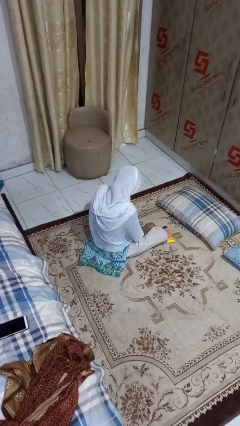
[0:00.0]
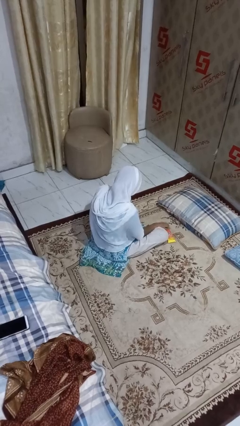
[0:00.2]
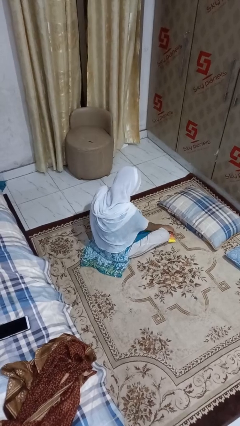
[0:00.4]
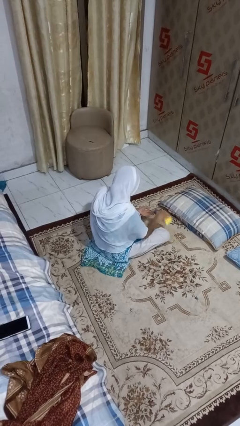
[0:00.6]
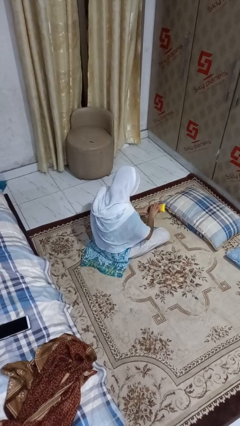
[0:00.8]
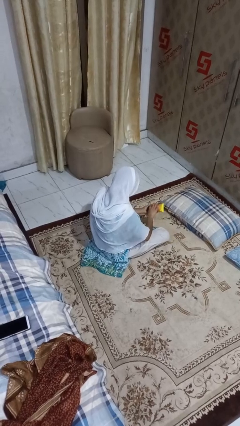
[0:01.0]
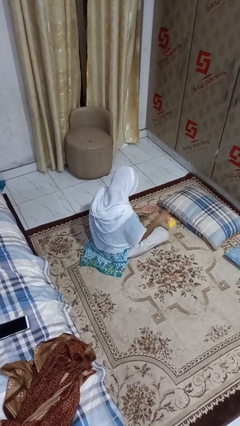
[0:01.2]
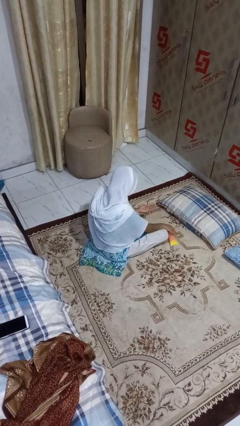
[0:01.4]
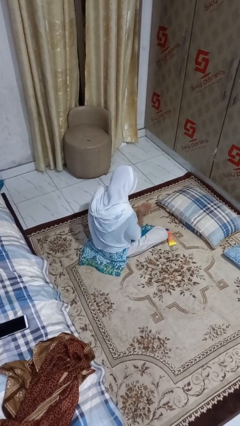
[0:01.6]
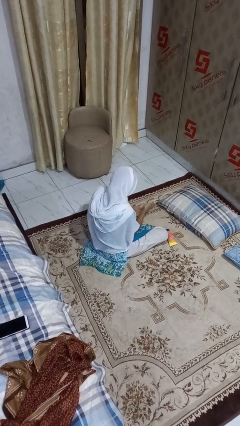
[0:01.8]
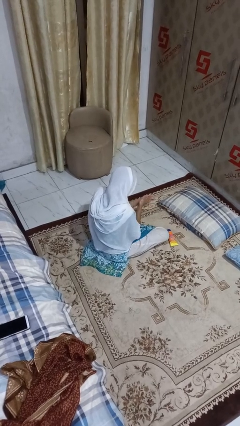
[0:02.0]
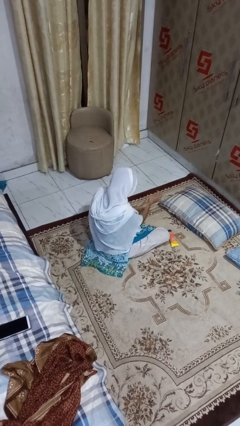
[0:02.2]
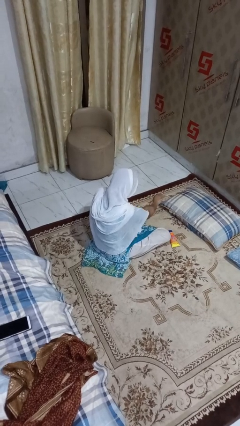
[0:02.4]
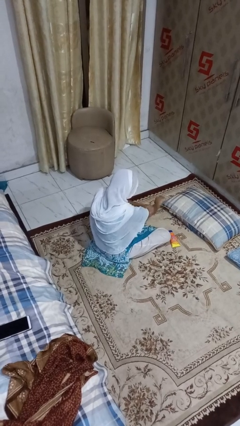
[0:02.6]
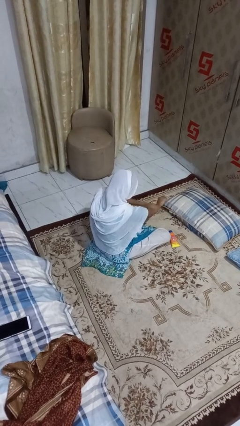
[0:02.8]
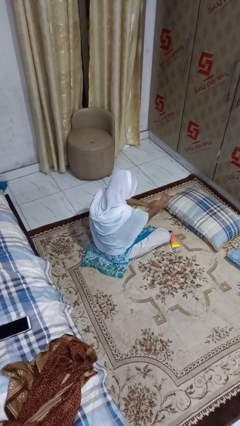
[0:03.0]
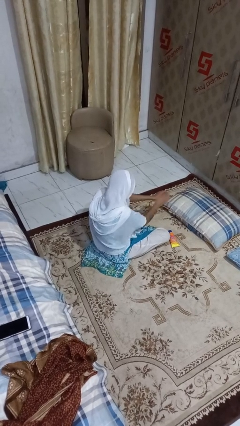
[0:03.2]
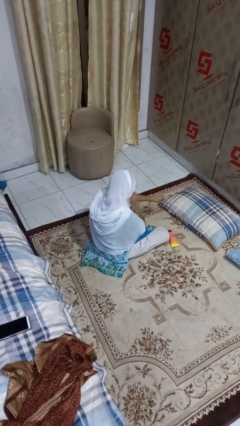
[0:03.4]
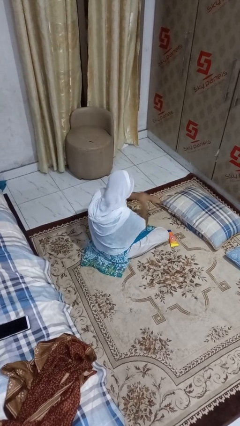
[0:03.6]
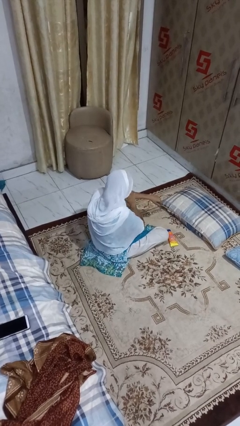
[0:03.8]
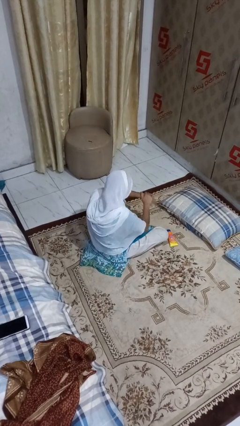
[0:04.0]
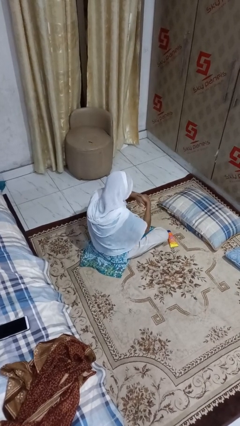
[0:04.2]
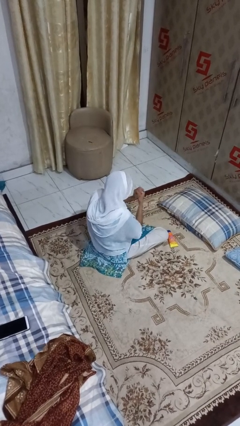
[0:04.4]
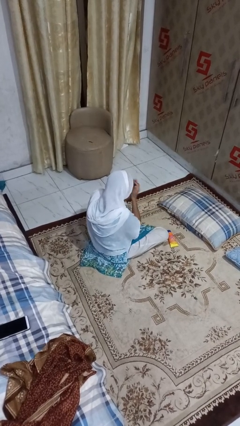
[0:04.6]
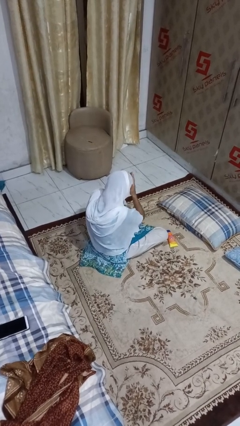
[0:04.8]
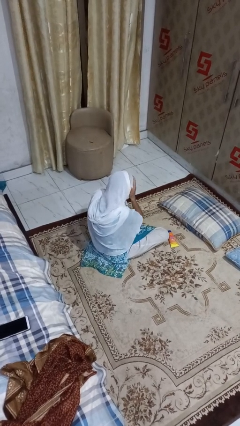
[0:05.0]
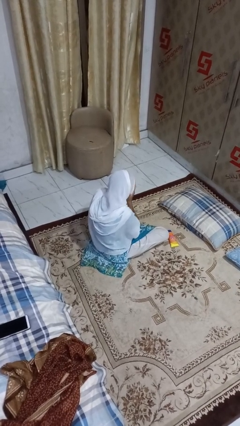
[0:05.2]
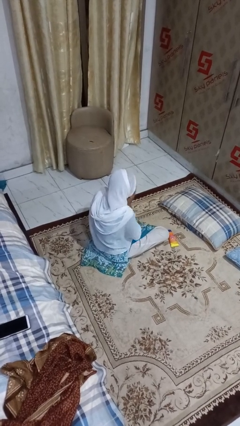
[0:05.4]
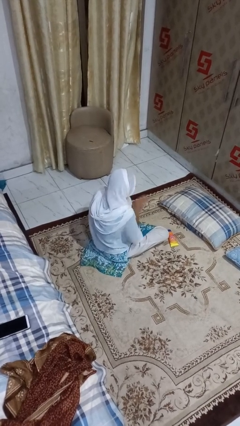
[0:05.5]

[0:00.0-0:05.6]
person applies sunscreen

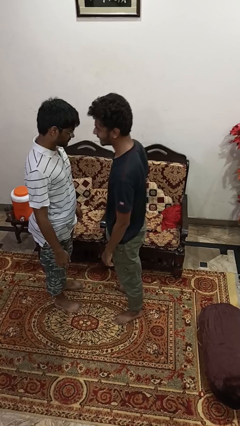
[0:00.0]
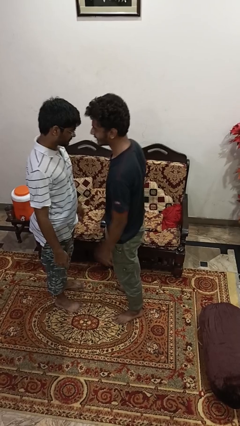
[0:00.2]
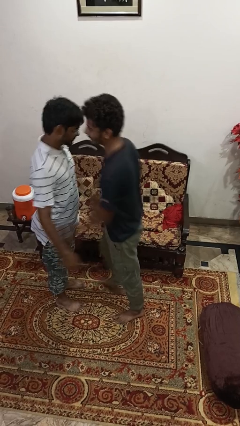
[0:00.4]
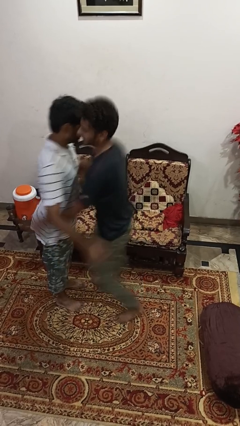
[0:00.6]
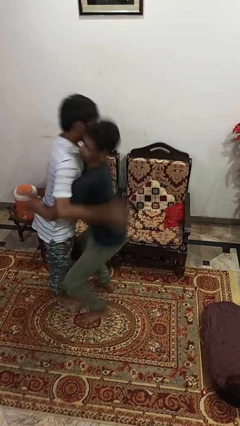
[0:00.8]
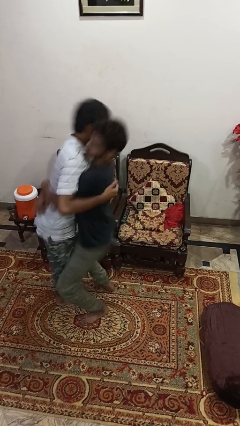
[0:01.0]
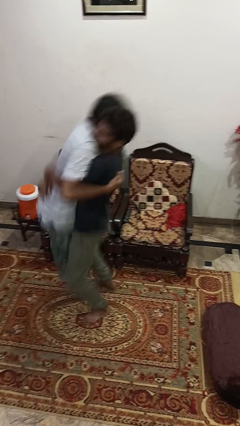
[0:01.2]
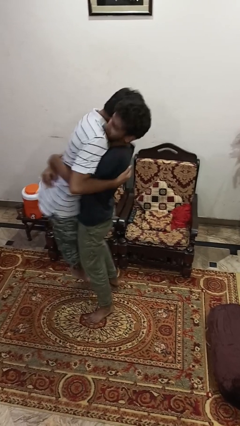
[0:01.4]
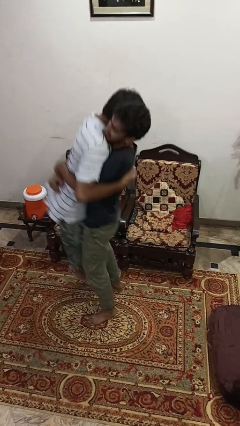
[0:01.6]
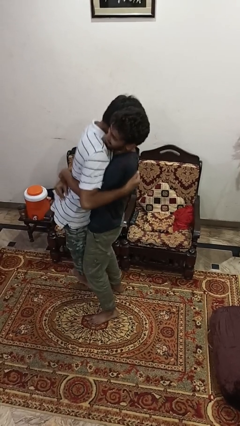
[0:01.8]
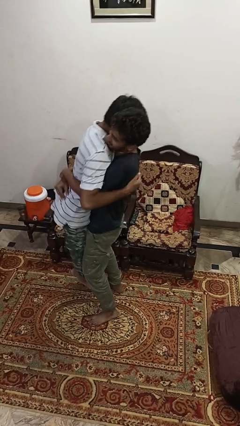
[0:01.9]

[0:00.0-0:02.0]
person picks up person

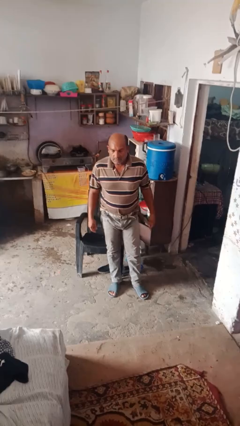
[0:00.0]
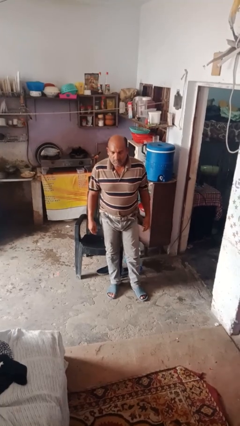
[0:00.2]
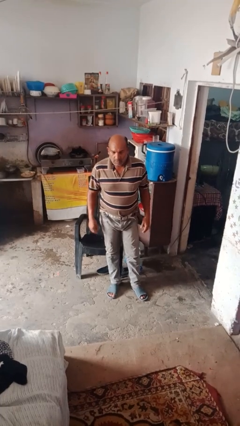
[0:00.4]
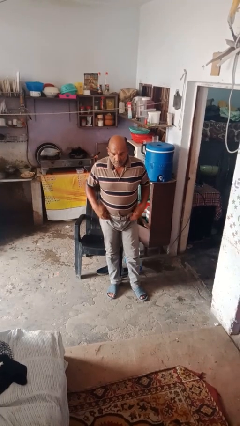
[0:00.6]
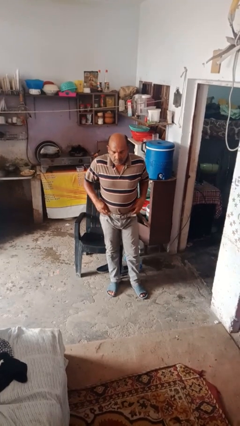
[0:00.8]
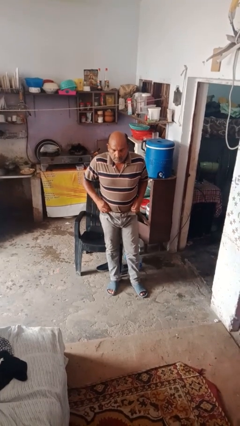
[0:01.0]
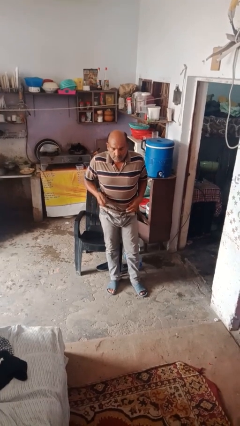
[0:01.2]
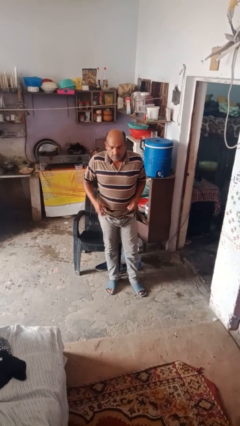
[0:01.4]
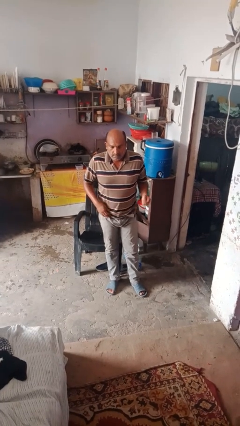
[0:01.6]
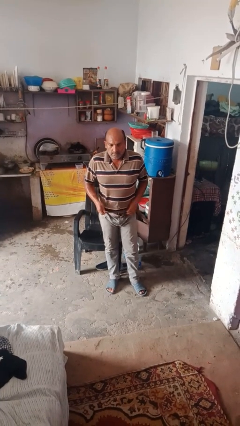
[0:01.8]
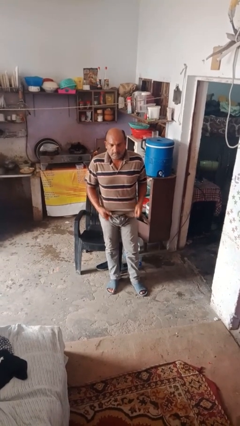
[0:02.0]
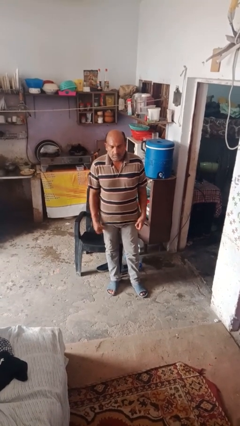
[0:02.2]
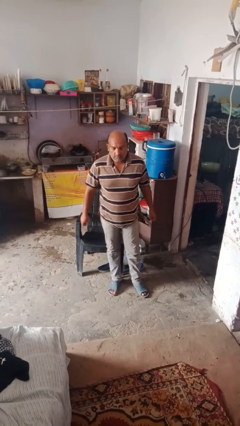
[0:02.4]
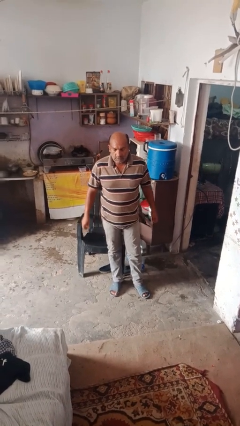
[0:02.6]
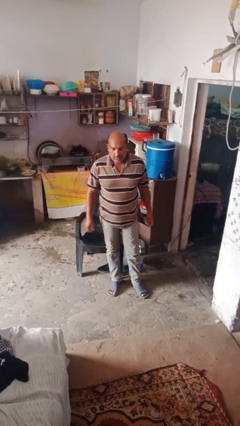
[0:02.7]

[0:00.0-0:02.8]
person untucks shirt

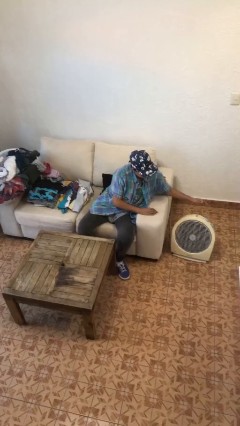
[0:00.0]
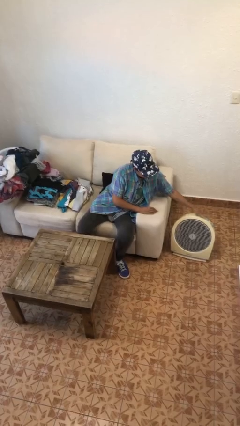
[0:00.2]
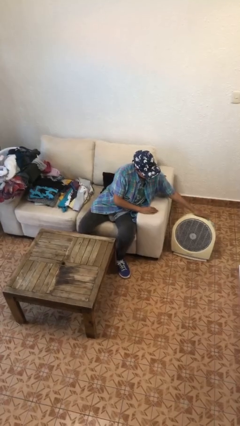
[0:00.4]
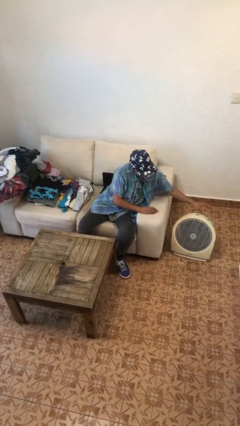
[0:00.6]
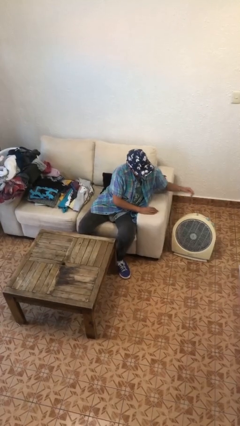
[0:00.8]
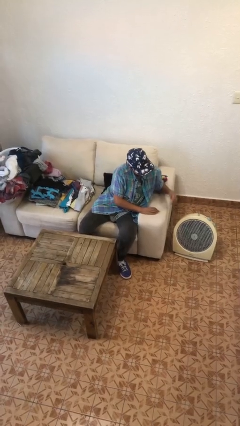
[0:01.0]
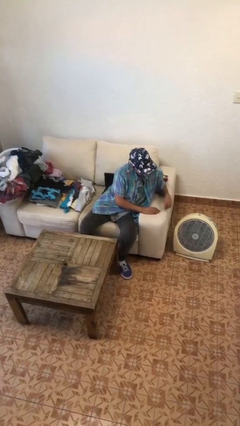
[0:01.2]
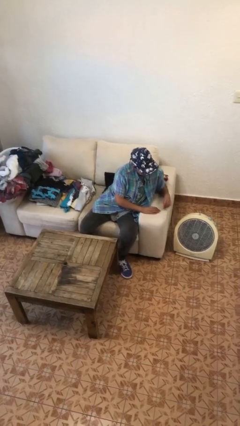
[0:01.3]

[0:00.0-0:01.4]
person turns off fan

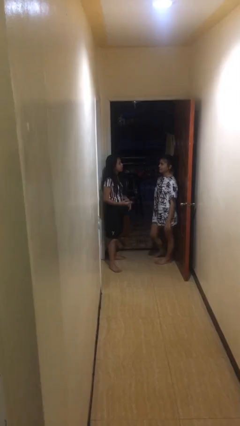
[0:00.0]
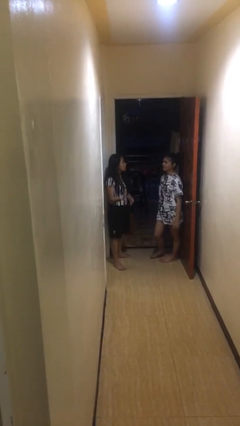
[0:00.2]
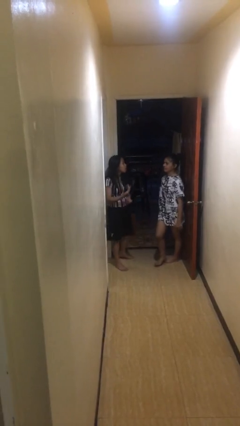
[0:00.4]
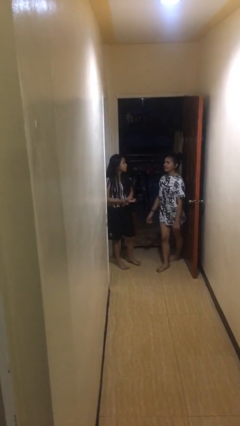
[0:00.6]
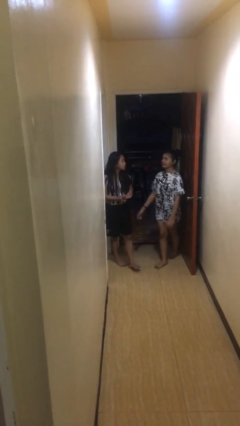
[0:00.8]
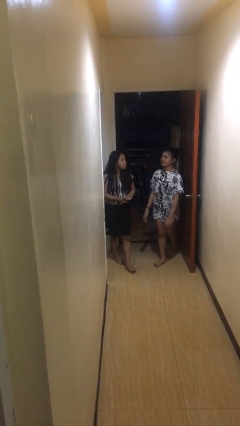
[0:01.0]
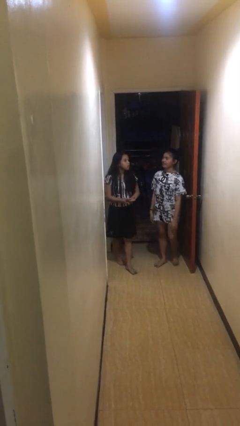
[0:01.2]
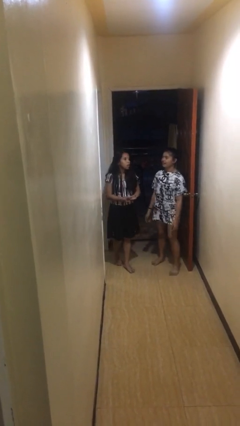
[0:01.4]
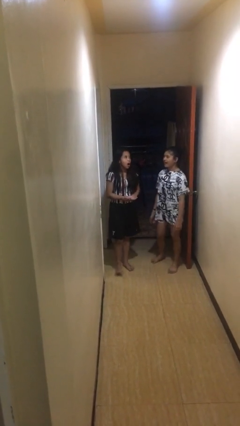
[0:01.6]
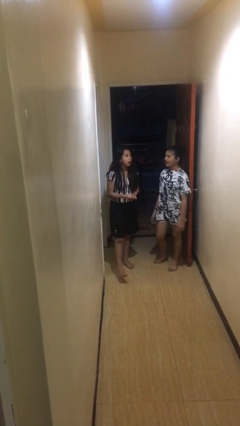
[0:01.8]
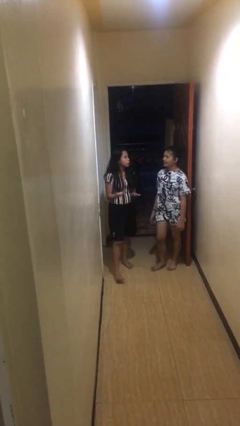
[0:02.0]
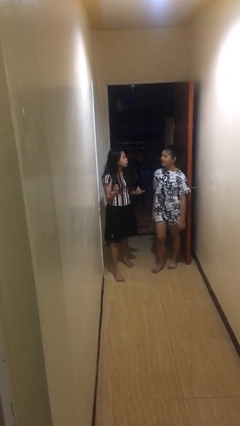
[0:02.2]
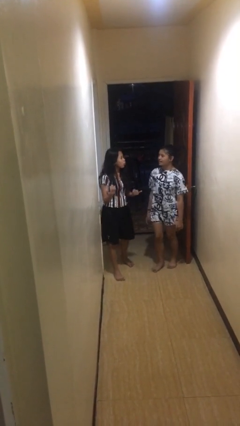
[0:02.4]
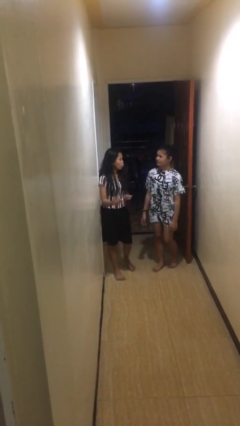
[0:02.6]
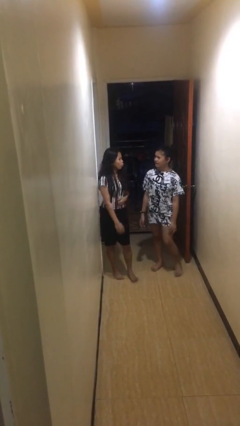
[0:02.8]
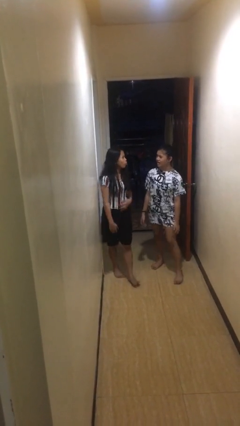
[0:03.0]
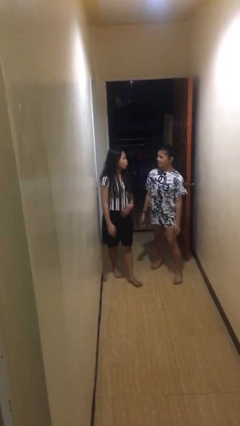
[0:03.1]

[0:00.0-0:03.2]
person talks to person

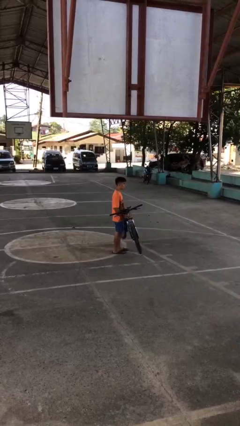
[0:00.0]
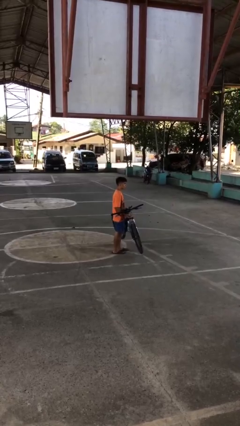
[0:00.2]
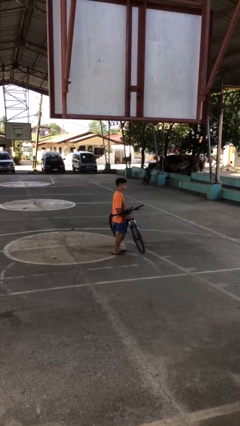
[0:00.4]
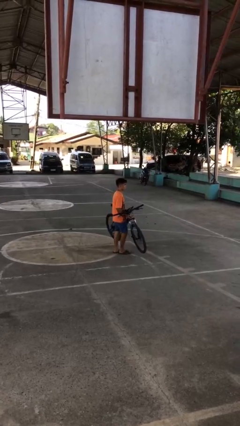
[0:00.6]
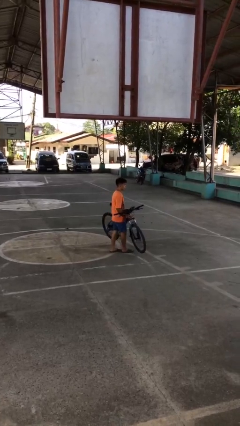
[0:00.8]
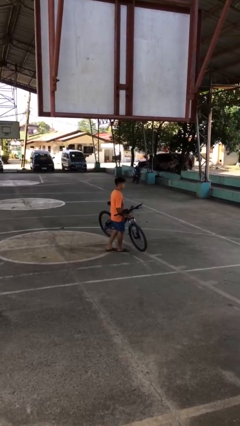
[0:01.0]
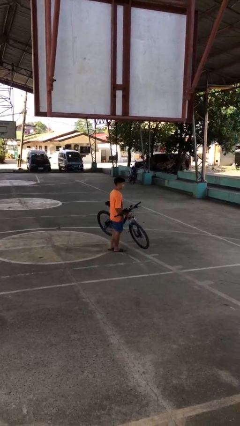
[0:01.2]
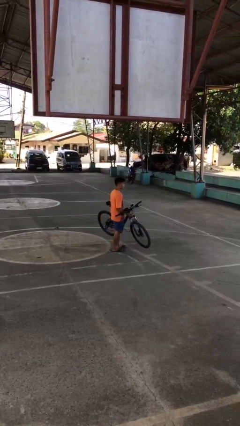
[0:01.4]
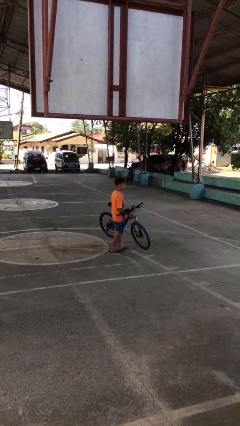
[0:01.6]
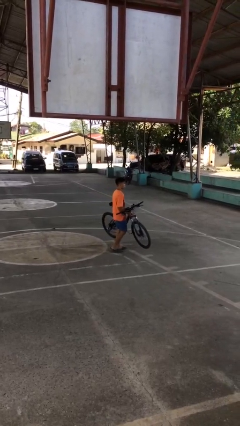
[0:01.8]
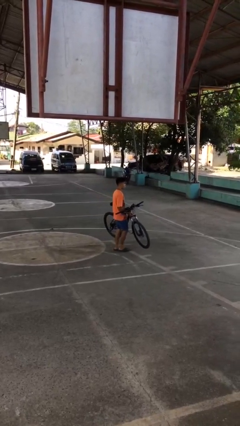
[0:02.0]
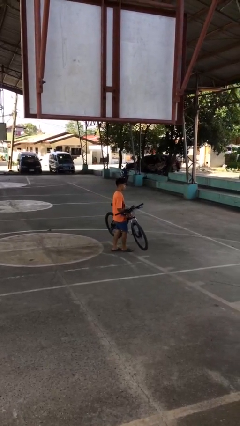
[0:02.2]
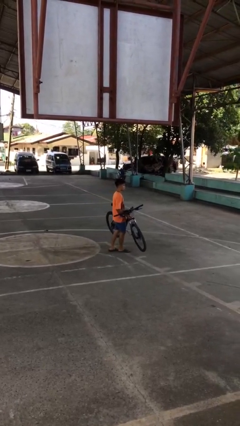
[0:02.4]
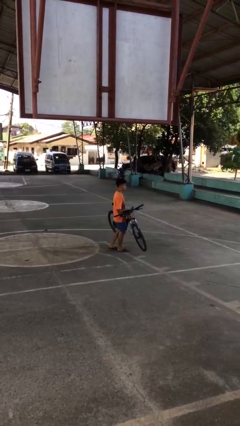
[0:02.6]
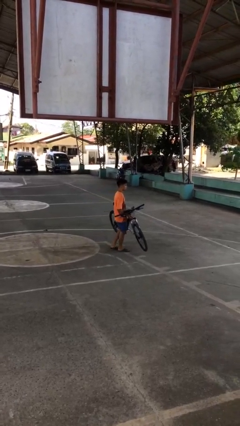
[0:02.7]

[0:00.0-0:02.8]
person carries bicycle
